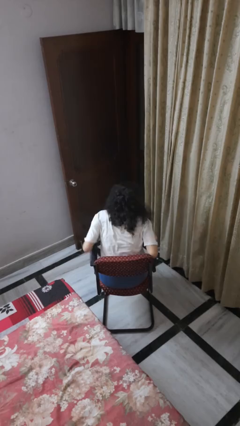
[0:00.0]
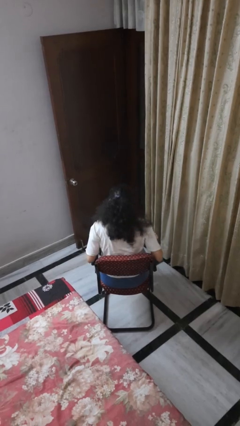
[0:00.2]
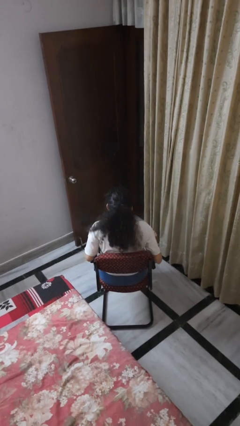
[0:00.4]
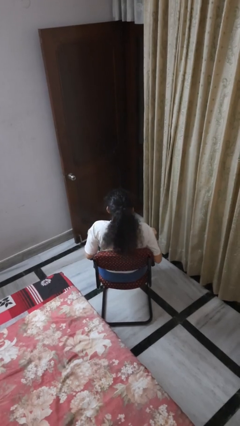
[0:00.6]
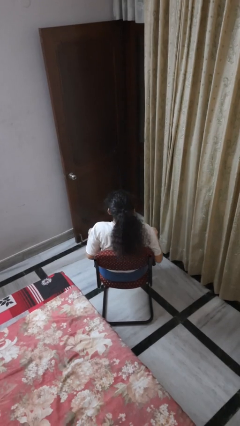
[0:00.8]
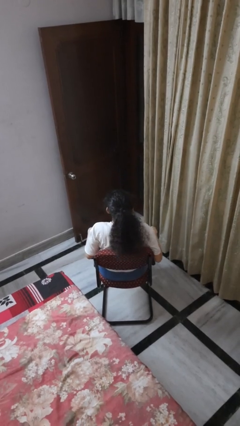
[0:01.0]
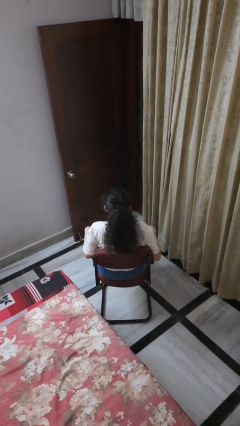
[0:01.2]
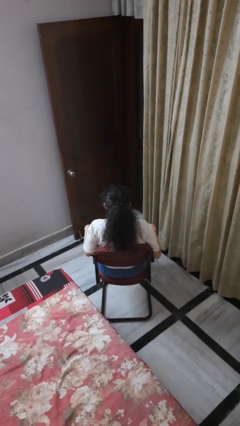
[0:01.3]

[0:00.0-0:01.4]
person sits down

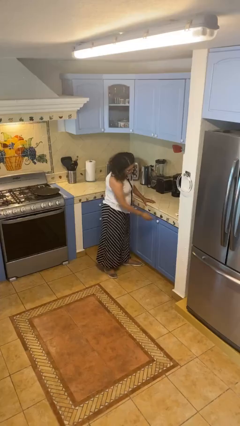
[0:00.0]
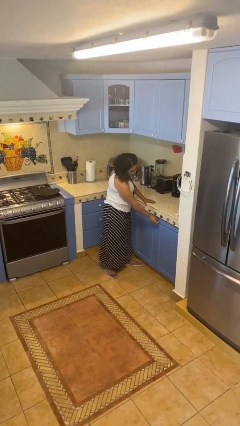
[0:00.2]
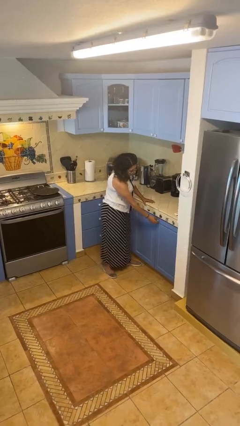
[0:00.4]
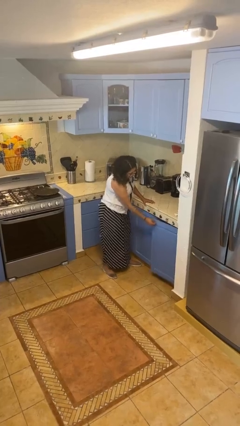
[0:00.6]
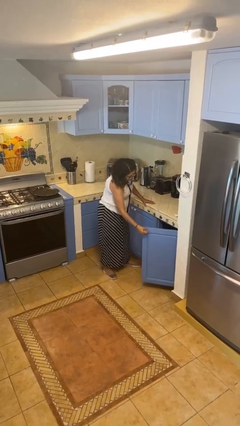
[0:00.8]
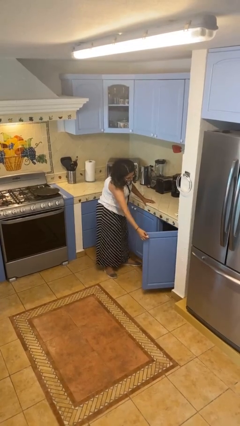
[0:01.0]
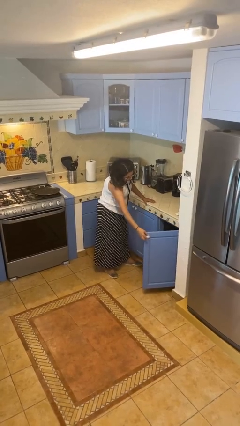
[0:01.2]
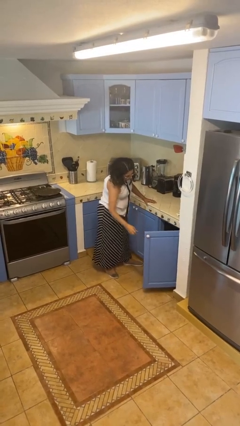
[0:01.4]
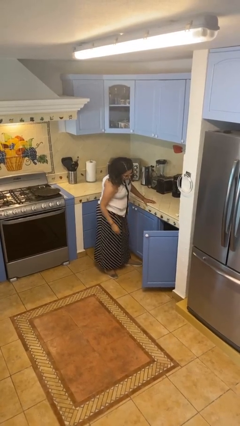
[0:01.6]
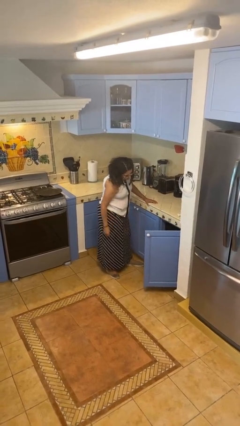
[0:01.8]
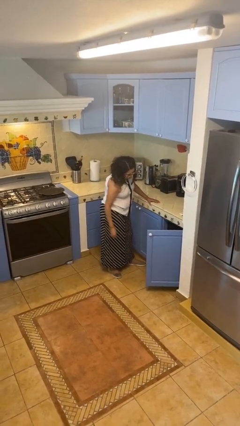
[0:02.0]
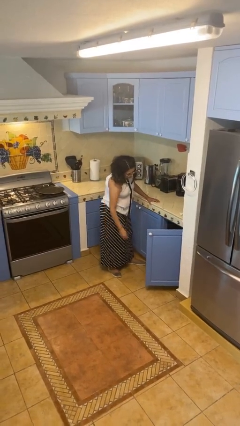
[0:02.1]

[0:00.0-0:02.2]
person opens cabinet

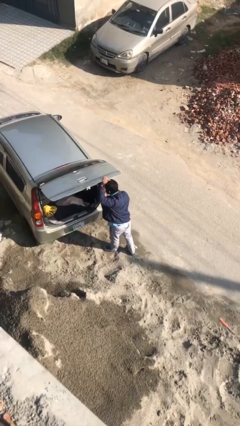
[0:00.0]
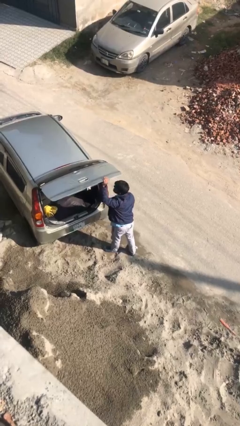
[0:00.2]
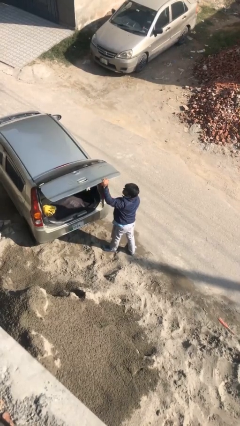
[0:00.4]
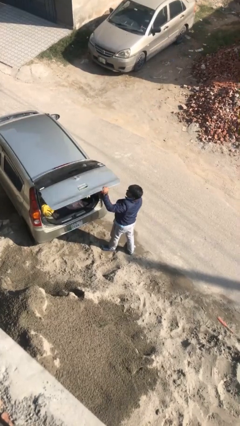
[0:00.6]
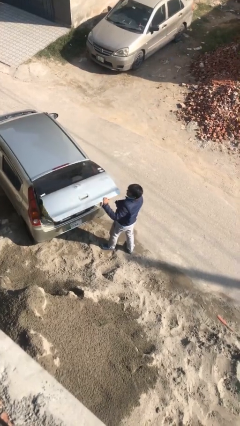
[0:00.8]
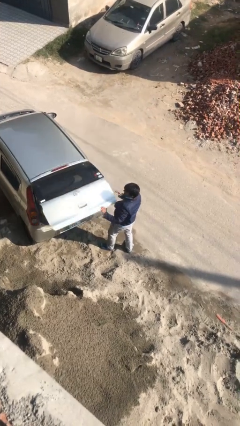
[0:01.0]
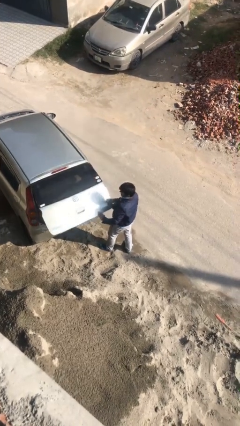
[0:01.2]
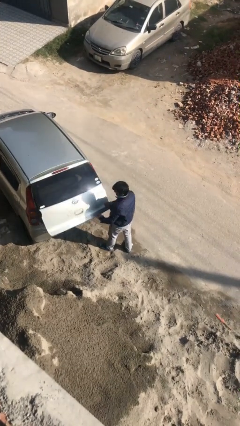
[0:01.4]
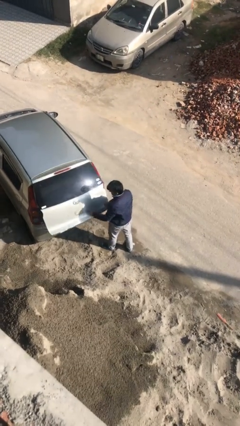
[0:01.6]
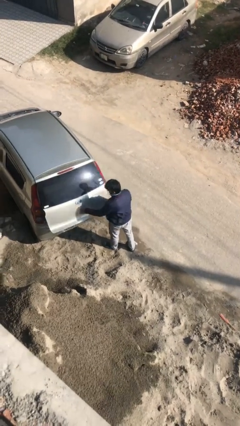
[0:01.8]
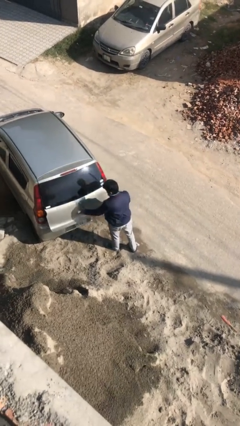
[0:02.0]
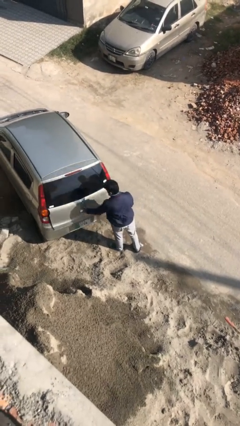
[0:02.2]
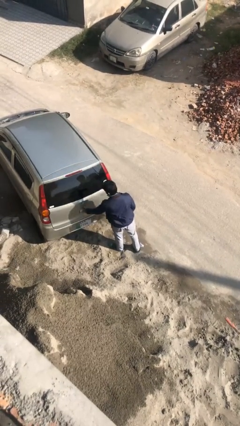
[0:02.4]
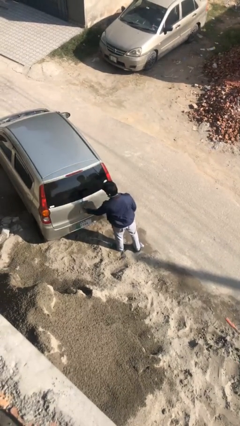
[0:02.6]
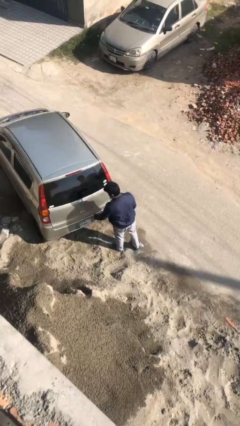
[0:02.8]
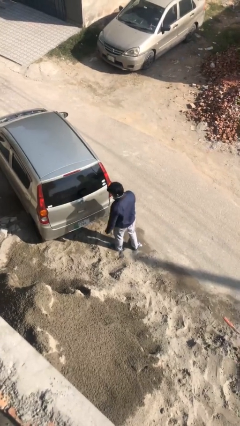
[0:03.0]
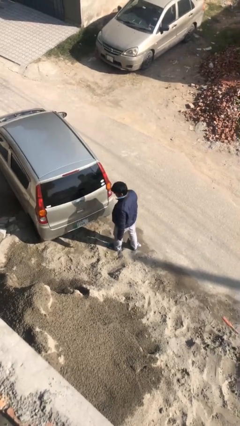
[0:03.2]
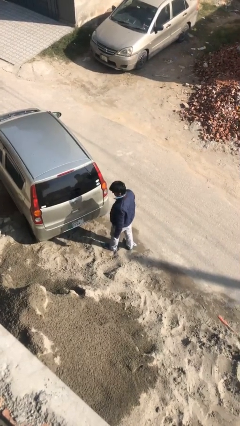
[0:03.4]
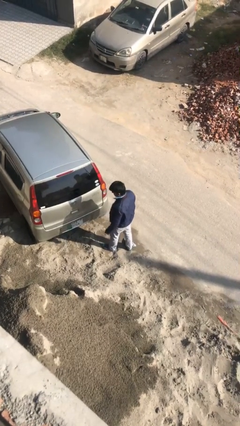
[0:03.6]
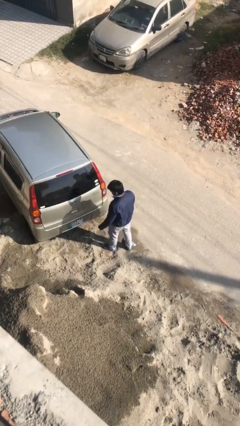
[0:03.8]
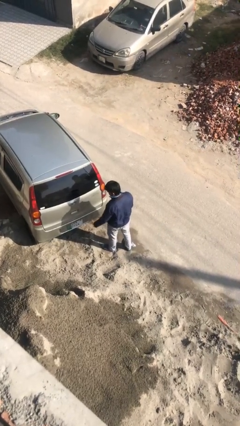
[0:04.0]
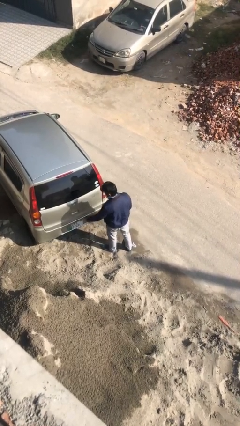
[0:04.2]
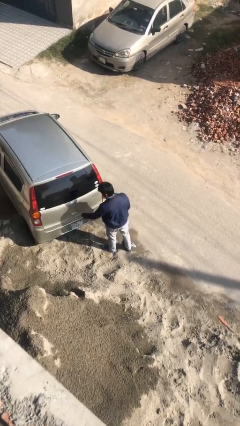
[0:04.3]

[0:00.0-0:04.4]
person closes car trunk

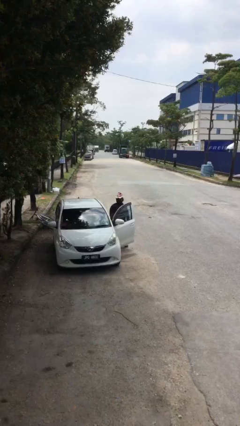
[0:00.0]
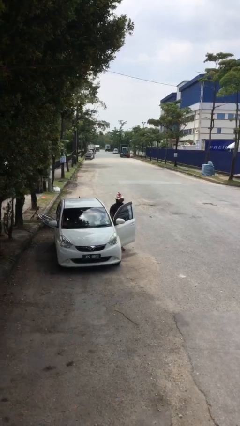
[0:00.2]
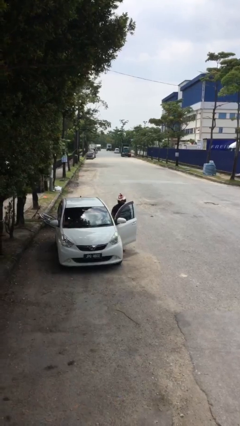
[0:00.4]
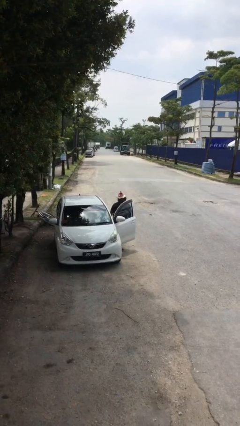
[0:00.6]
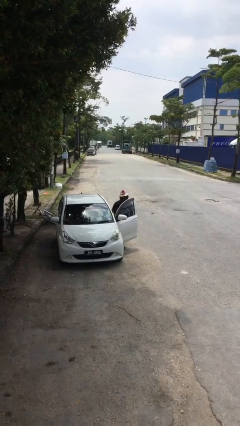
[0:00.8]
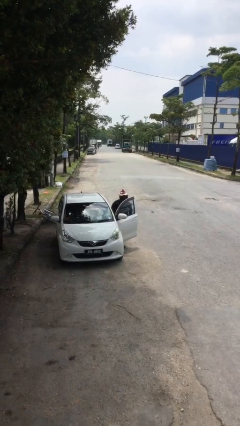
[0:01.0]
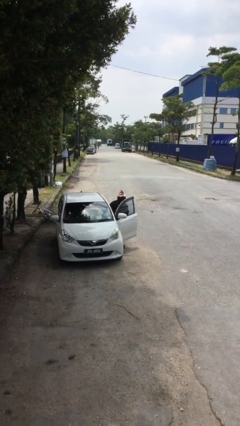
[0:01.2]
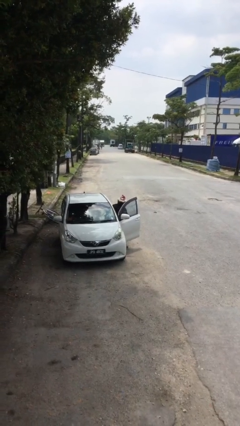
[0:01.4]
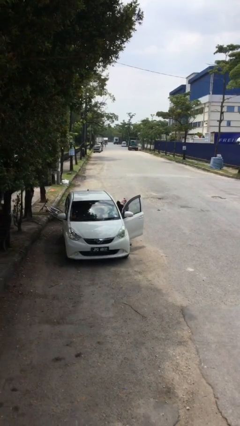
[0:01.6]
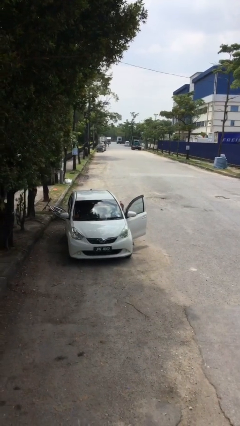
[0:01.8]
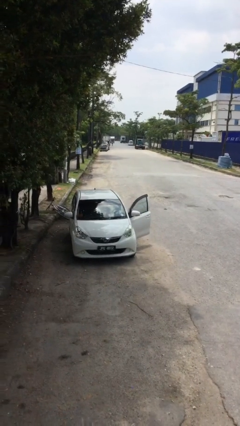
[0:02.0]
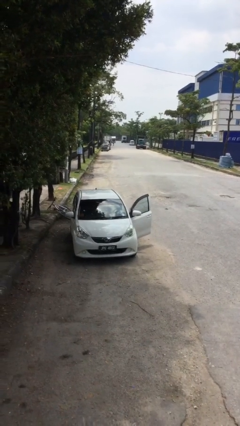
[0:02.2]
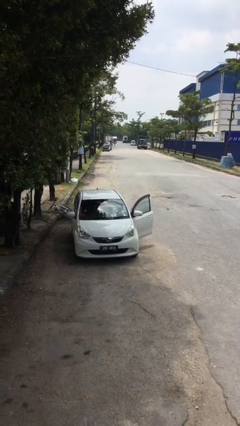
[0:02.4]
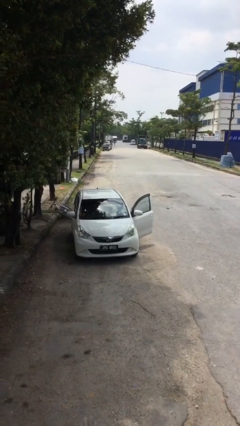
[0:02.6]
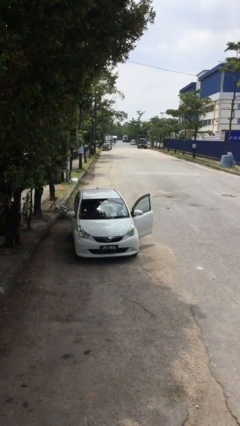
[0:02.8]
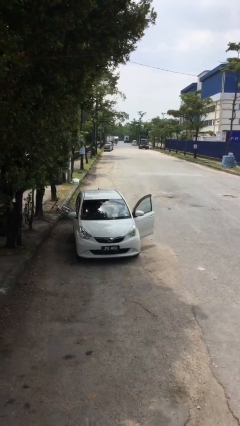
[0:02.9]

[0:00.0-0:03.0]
person enters car

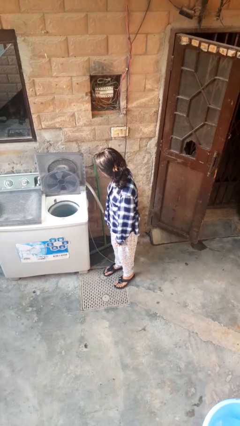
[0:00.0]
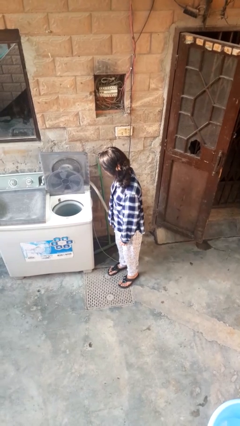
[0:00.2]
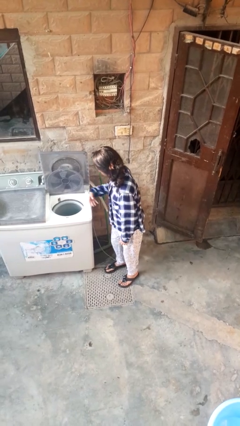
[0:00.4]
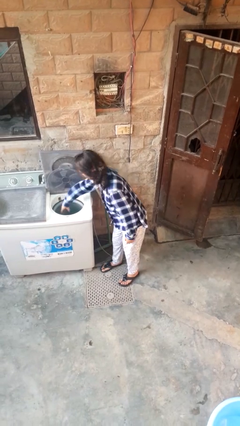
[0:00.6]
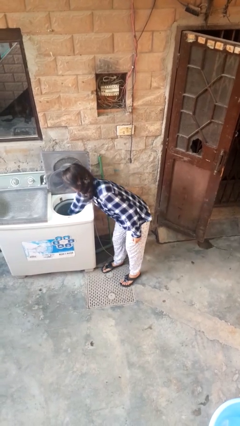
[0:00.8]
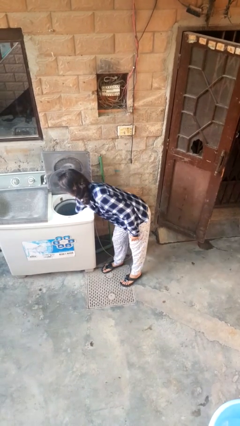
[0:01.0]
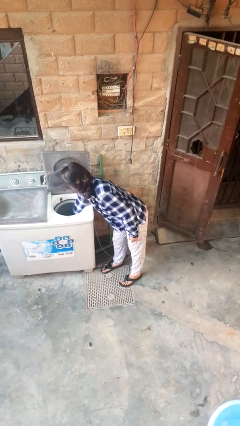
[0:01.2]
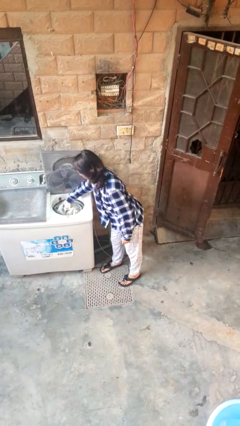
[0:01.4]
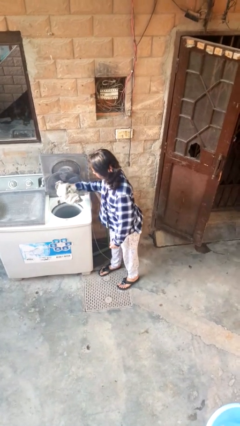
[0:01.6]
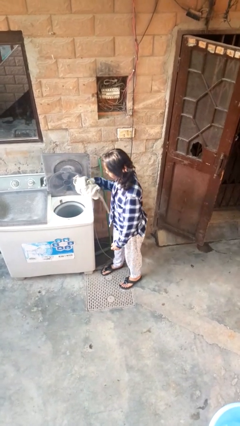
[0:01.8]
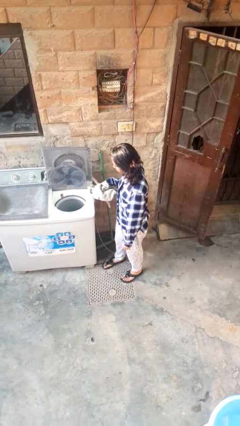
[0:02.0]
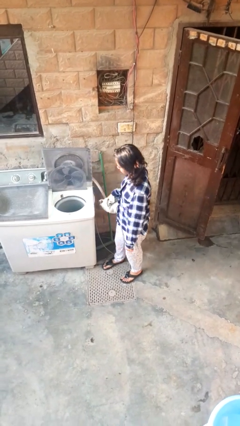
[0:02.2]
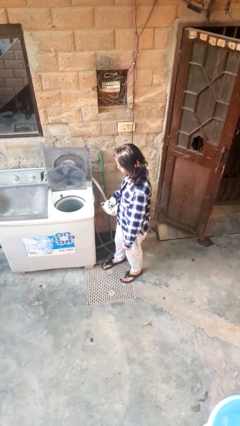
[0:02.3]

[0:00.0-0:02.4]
person unloads dryer

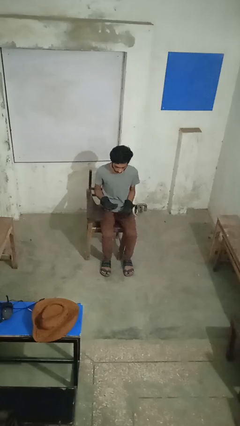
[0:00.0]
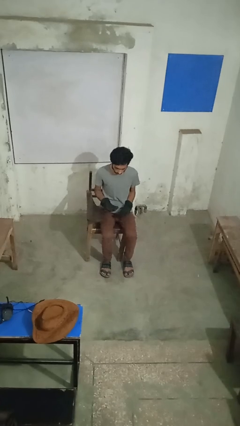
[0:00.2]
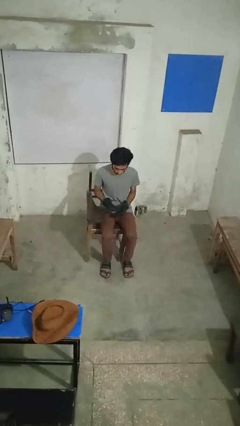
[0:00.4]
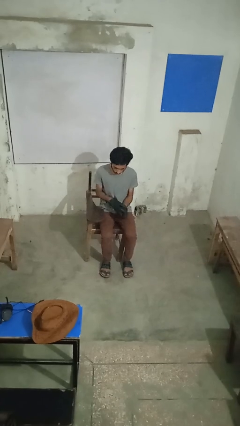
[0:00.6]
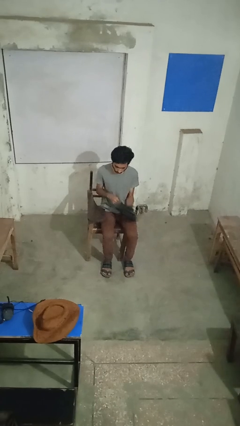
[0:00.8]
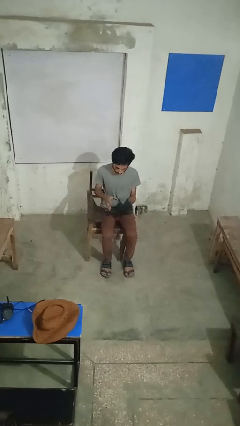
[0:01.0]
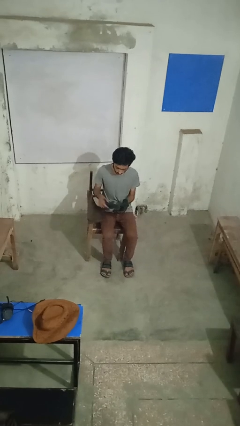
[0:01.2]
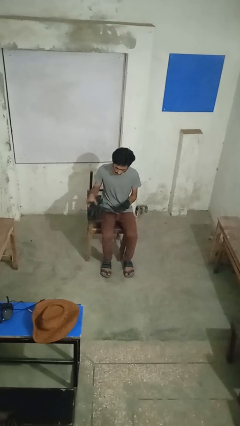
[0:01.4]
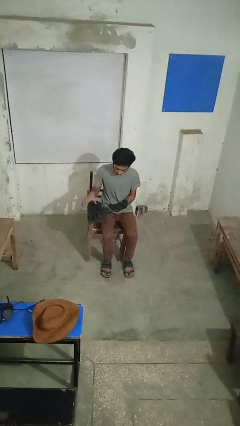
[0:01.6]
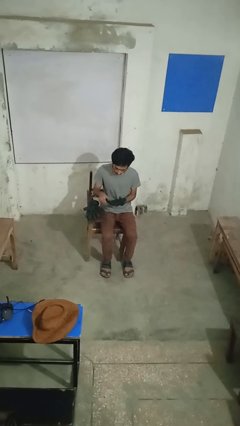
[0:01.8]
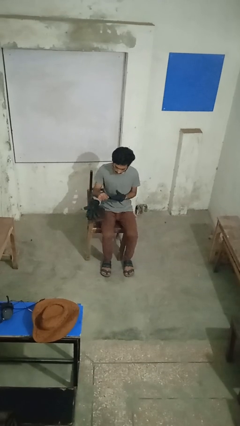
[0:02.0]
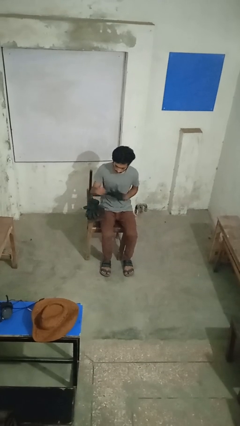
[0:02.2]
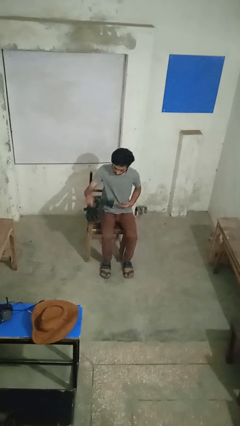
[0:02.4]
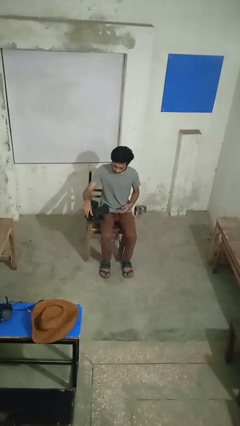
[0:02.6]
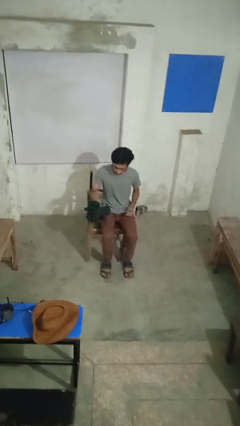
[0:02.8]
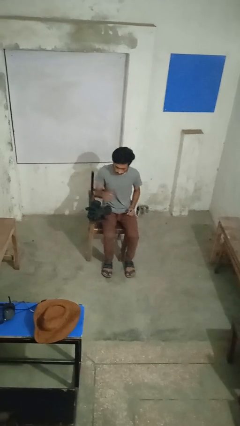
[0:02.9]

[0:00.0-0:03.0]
person takes off gloves

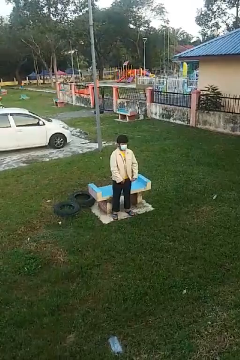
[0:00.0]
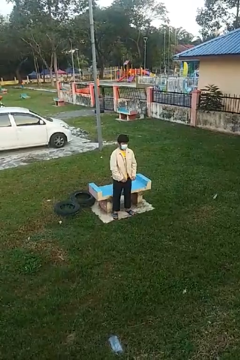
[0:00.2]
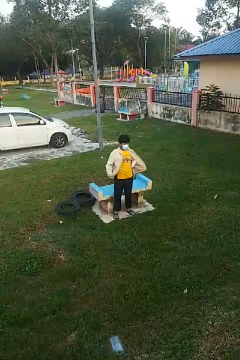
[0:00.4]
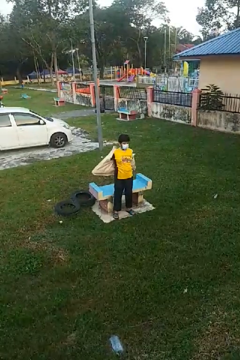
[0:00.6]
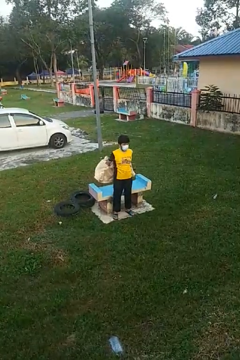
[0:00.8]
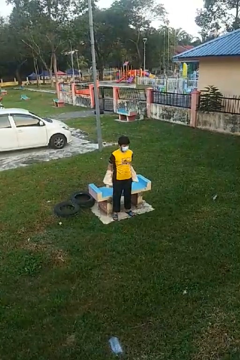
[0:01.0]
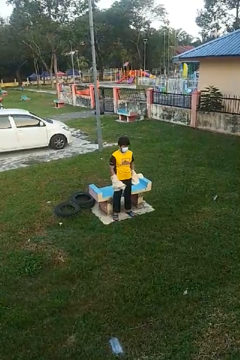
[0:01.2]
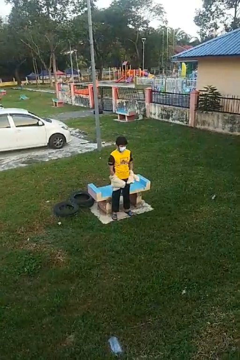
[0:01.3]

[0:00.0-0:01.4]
person takes off jacket
